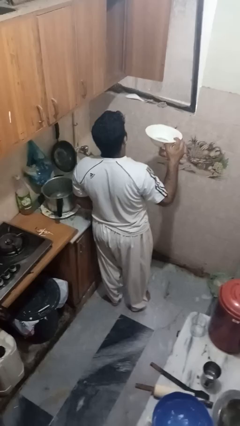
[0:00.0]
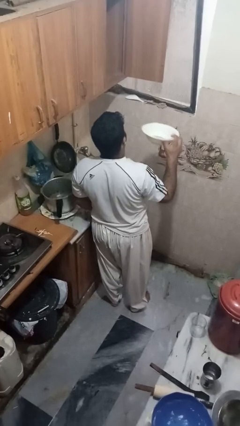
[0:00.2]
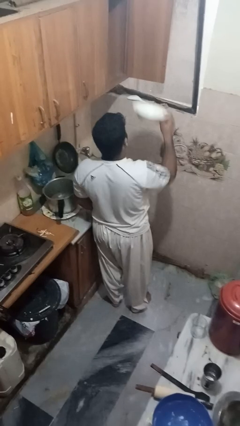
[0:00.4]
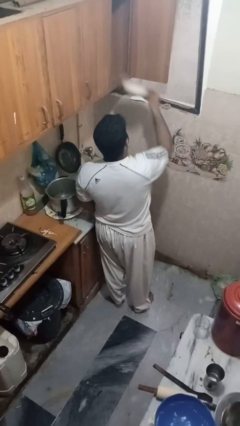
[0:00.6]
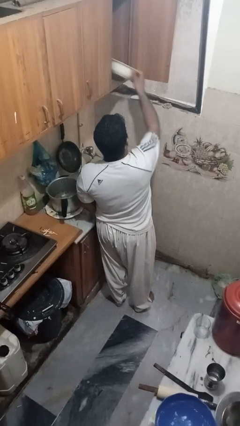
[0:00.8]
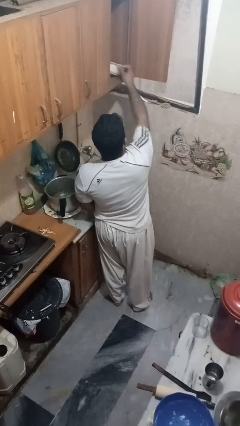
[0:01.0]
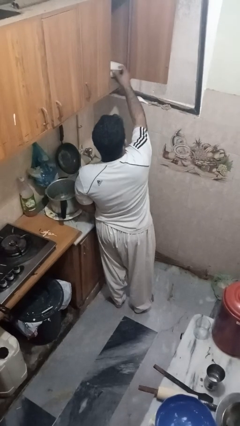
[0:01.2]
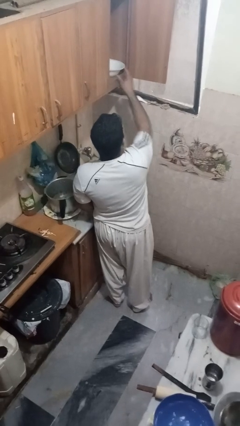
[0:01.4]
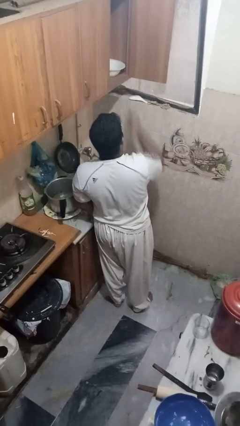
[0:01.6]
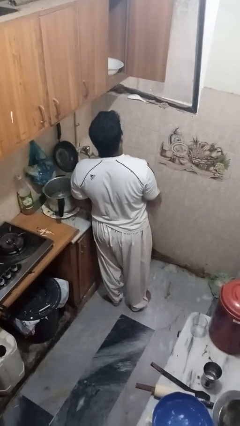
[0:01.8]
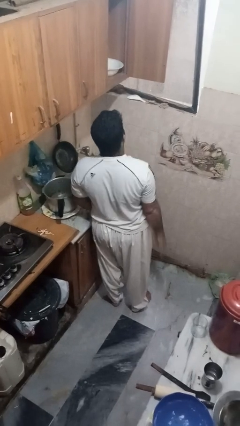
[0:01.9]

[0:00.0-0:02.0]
person puts object in cabinet

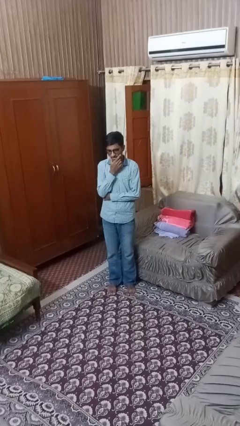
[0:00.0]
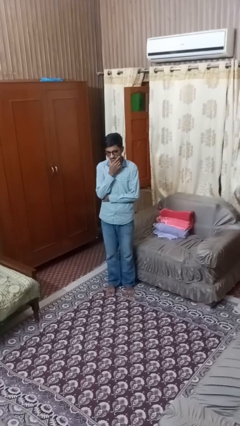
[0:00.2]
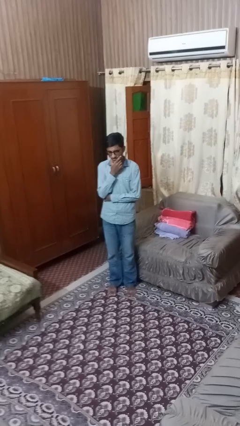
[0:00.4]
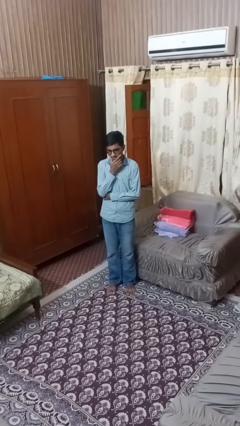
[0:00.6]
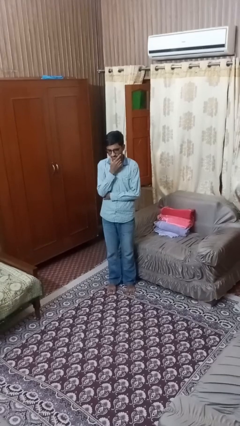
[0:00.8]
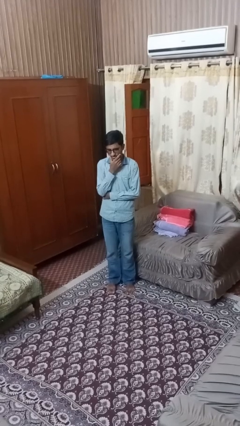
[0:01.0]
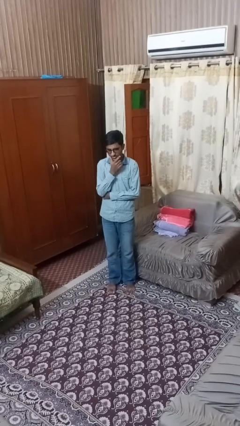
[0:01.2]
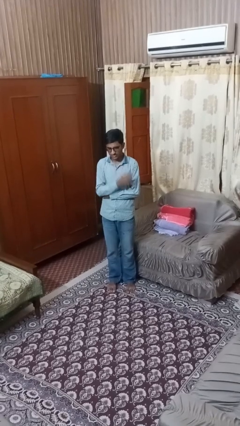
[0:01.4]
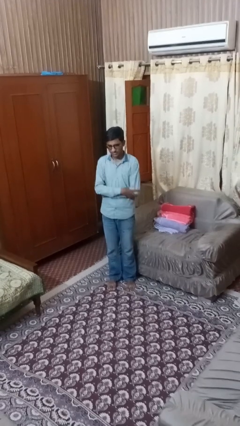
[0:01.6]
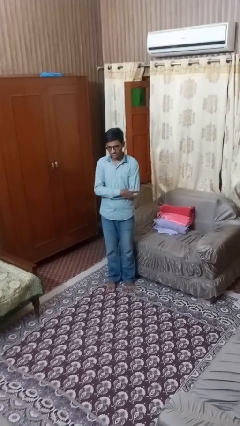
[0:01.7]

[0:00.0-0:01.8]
person strokes chin

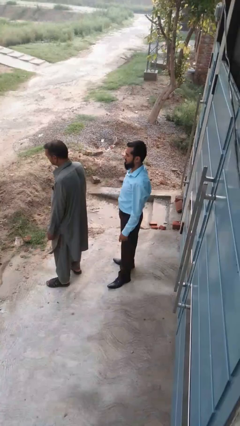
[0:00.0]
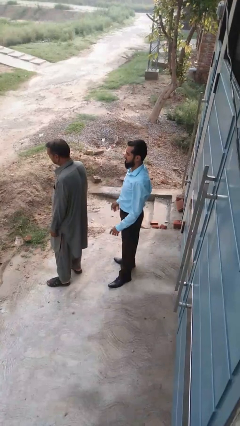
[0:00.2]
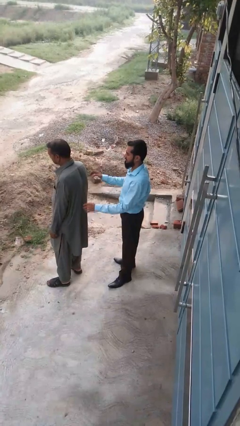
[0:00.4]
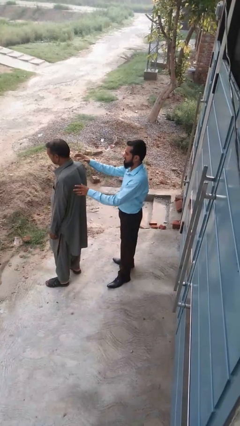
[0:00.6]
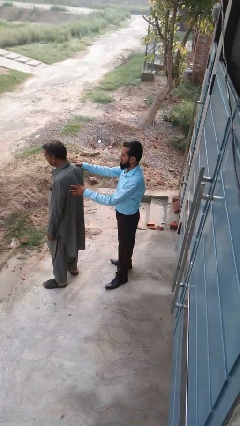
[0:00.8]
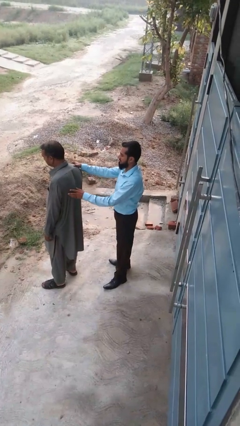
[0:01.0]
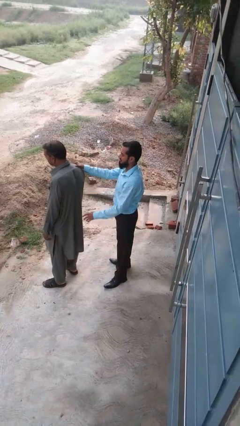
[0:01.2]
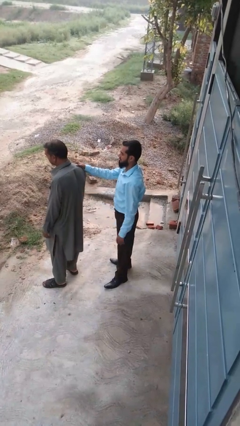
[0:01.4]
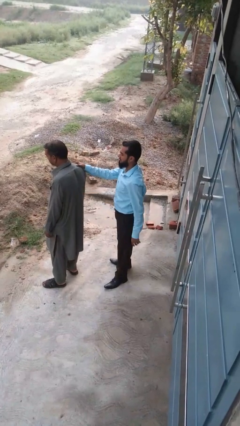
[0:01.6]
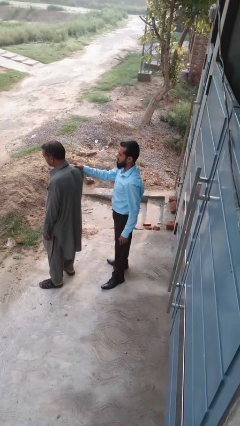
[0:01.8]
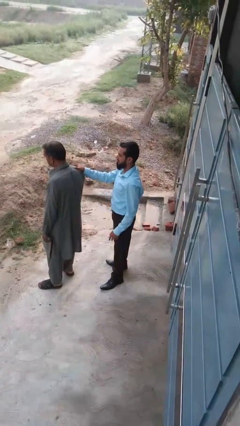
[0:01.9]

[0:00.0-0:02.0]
person grabs person by shoulder

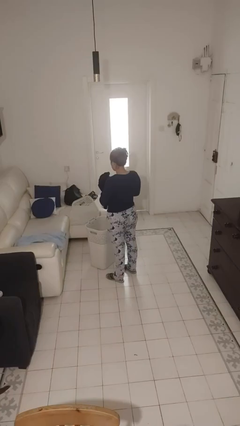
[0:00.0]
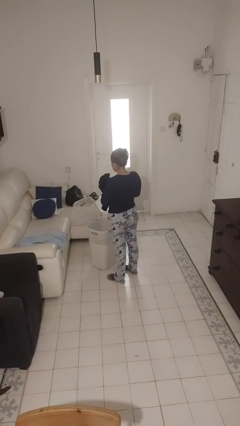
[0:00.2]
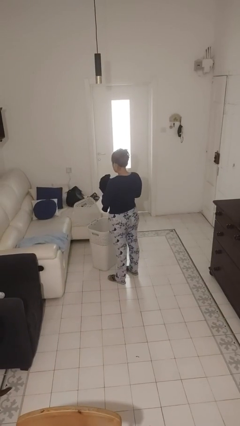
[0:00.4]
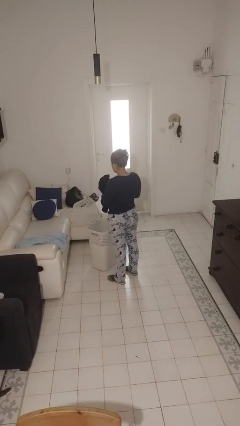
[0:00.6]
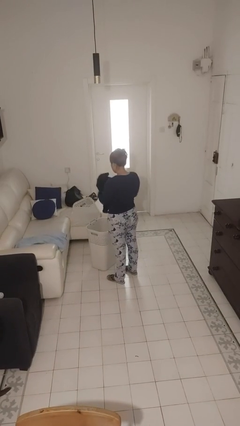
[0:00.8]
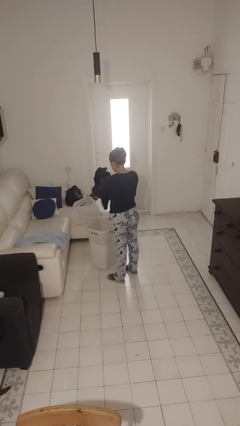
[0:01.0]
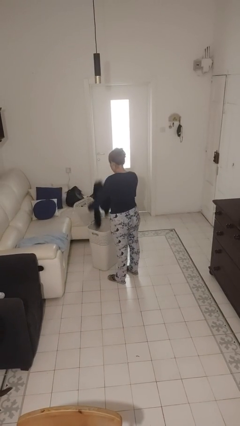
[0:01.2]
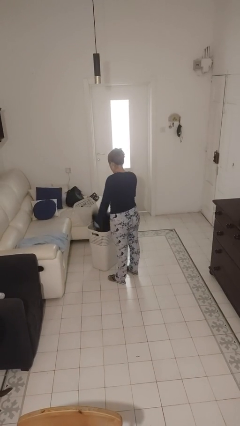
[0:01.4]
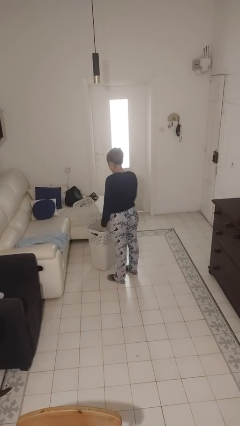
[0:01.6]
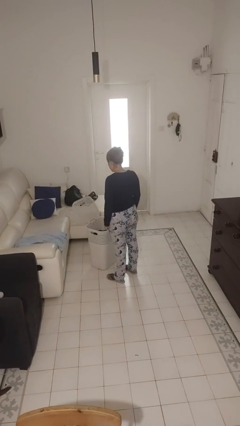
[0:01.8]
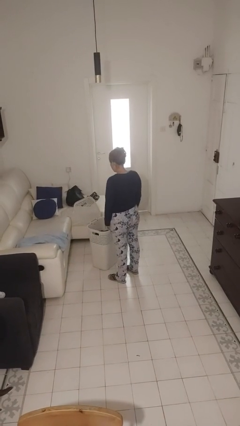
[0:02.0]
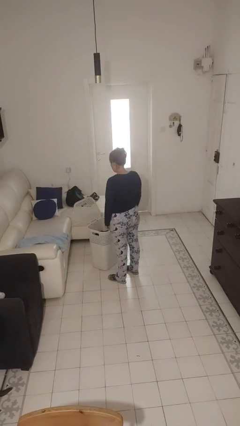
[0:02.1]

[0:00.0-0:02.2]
person puts object into basket

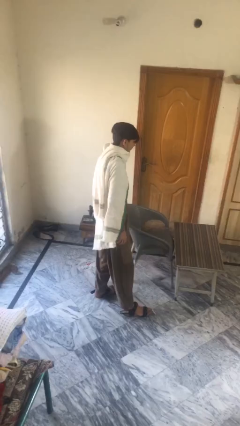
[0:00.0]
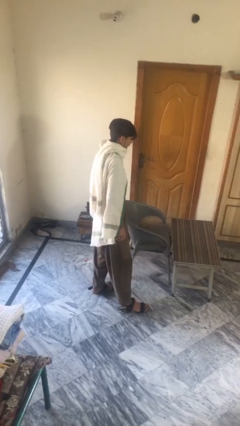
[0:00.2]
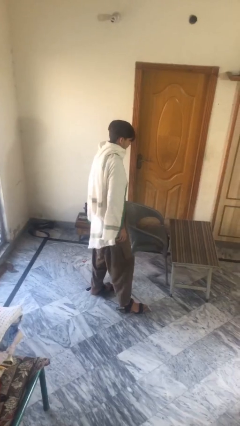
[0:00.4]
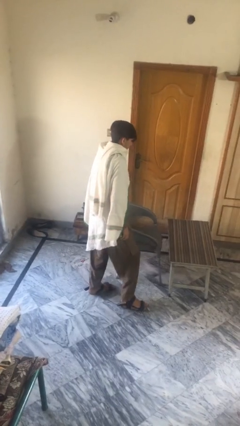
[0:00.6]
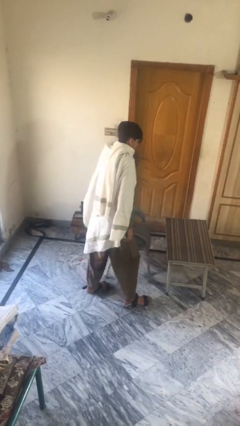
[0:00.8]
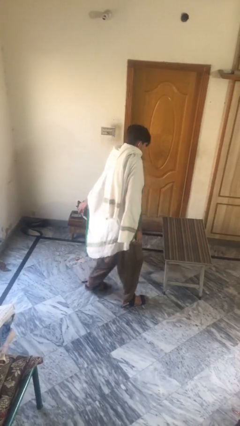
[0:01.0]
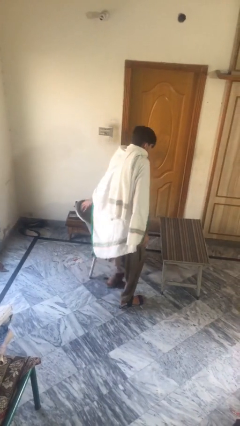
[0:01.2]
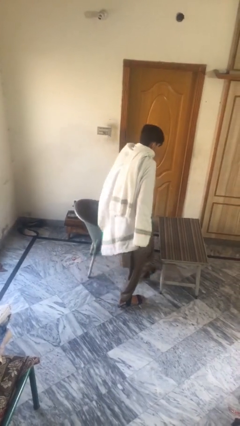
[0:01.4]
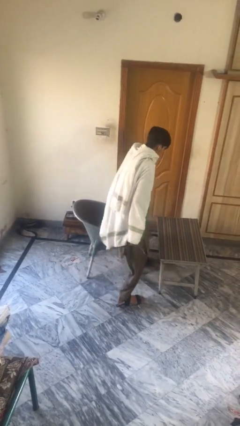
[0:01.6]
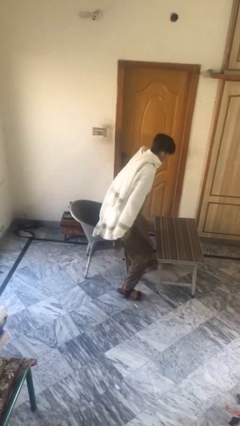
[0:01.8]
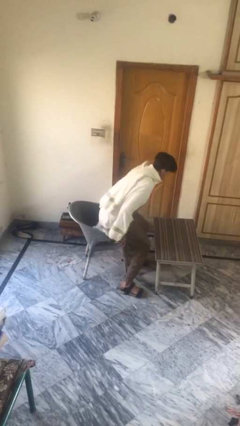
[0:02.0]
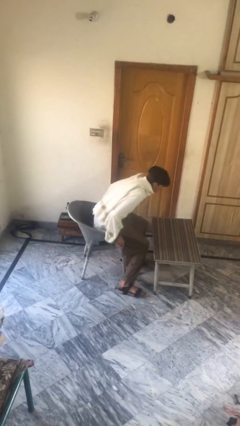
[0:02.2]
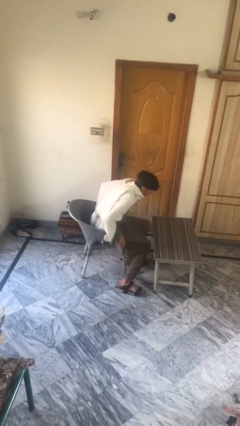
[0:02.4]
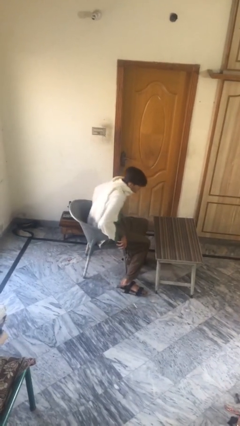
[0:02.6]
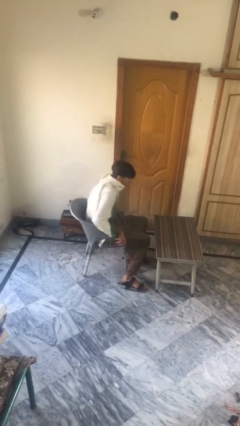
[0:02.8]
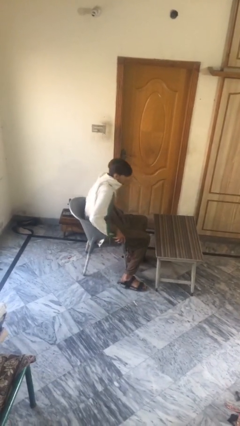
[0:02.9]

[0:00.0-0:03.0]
person sits down

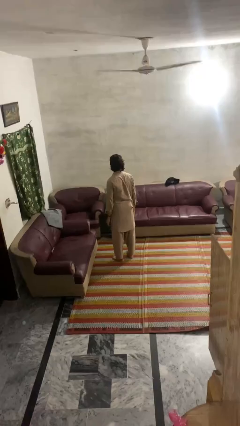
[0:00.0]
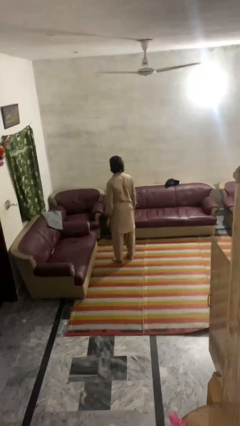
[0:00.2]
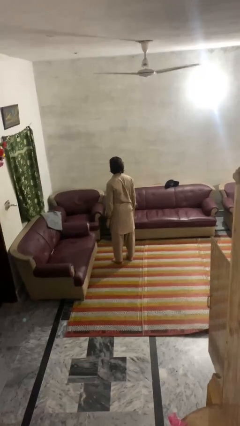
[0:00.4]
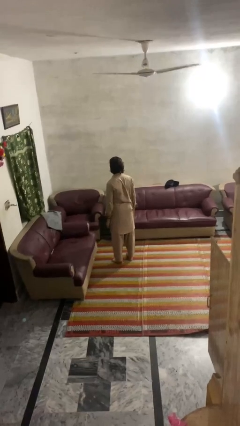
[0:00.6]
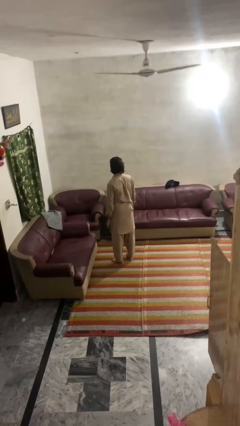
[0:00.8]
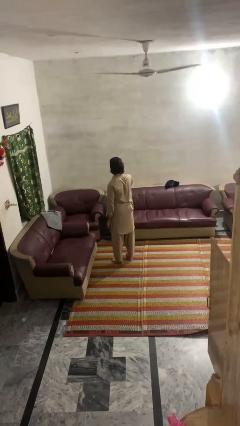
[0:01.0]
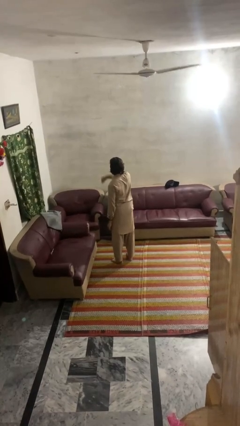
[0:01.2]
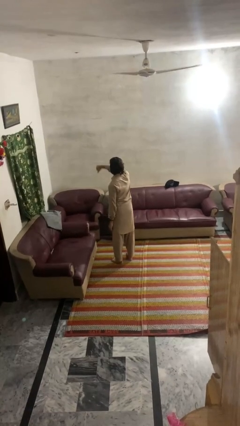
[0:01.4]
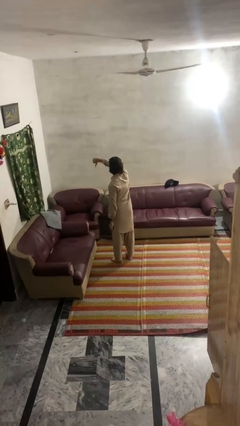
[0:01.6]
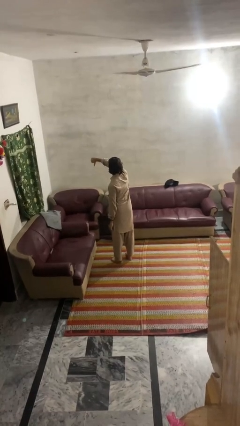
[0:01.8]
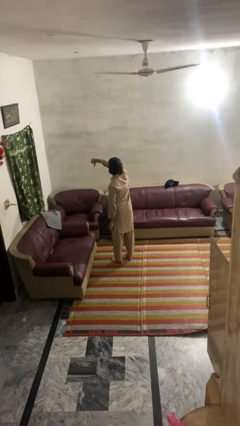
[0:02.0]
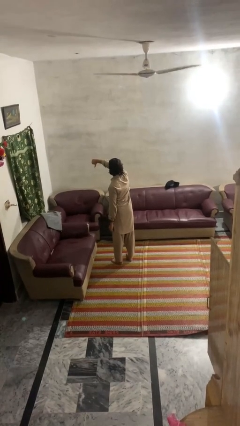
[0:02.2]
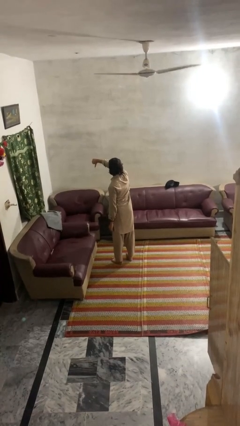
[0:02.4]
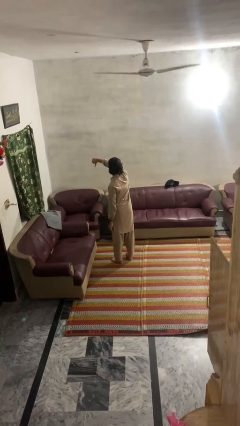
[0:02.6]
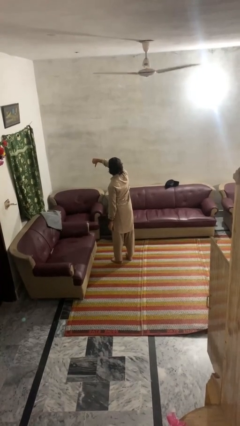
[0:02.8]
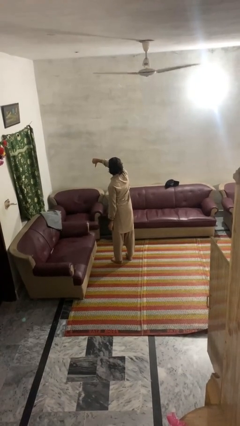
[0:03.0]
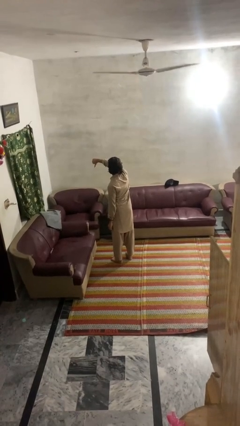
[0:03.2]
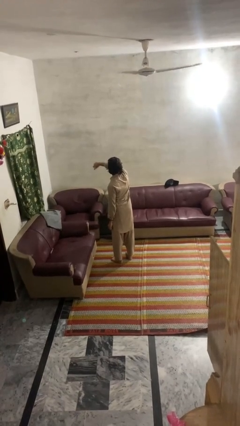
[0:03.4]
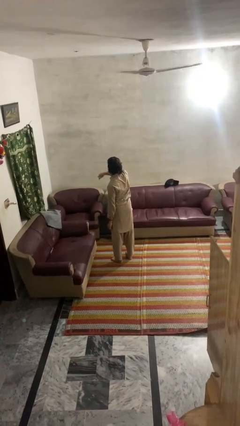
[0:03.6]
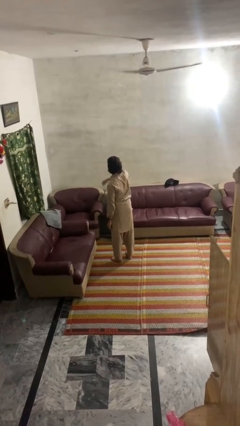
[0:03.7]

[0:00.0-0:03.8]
person gestures thumbs down

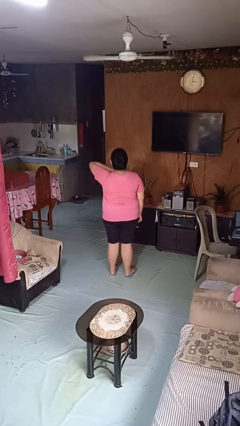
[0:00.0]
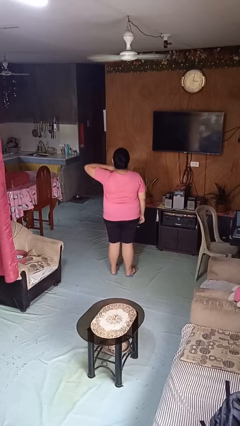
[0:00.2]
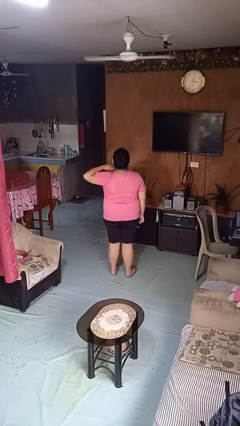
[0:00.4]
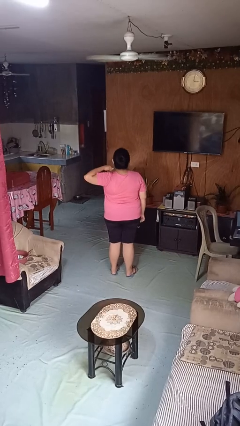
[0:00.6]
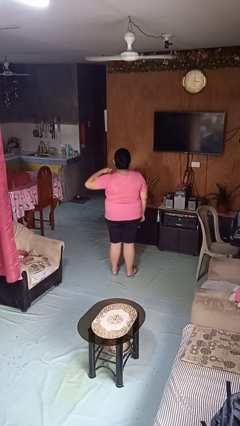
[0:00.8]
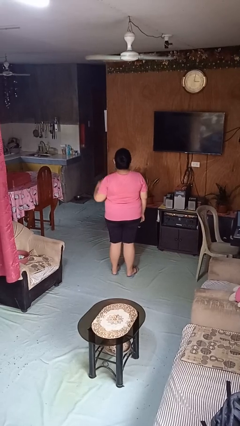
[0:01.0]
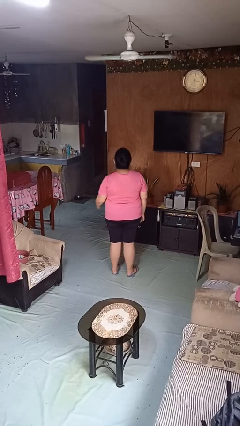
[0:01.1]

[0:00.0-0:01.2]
person gestures cut

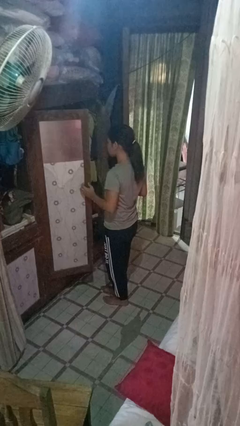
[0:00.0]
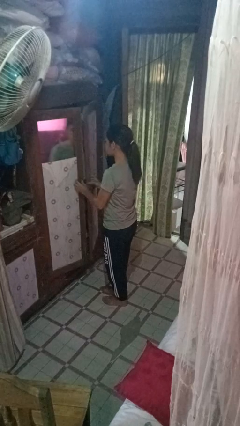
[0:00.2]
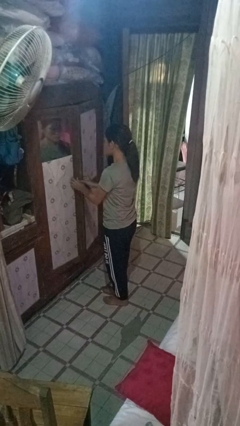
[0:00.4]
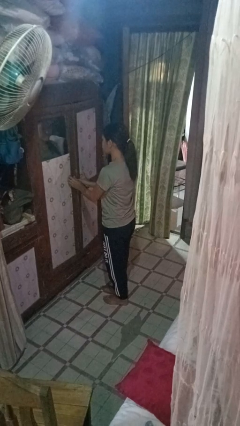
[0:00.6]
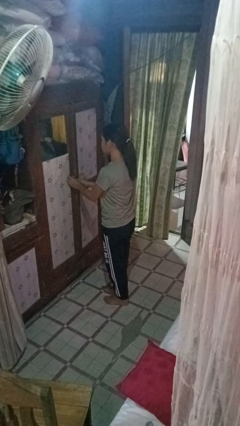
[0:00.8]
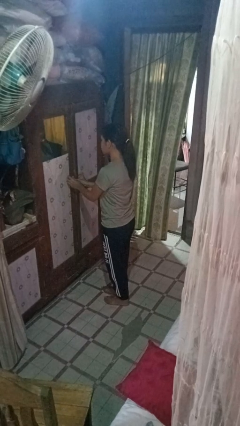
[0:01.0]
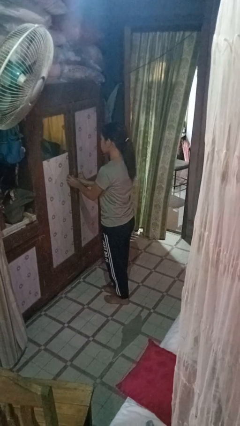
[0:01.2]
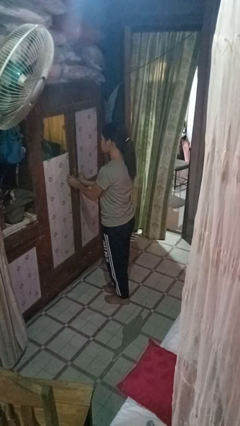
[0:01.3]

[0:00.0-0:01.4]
person closes closet door
